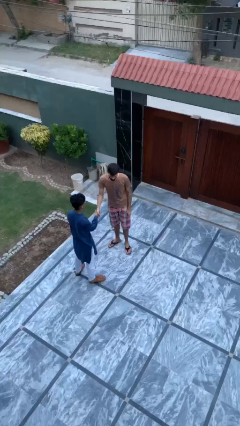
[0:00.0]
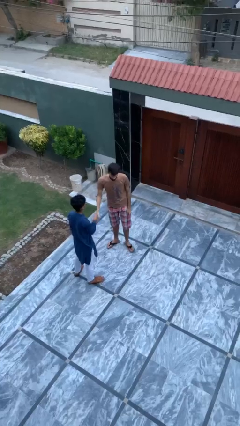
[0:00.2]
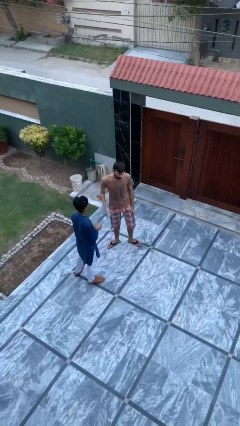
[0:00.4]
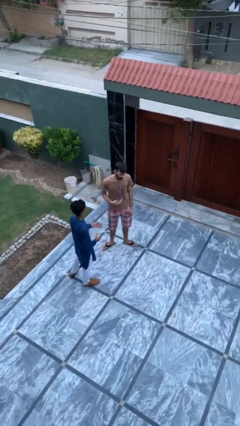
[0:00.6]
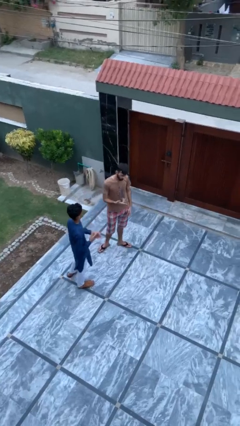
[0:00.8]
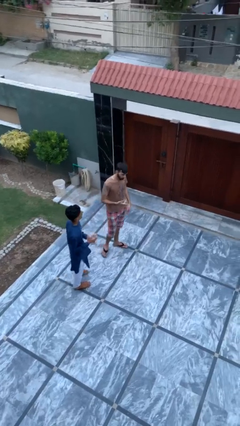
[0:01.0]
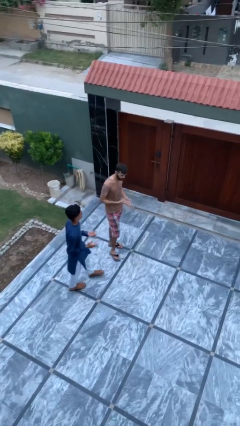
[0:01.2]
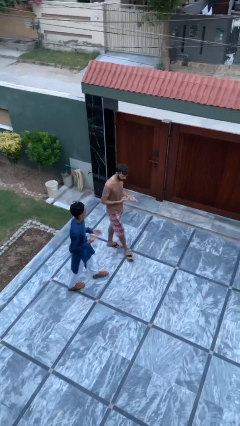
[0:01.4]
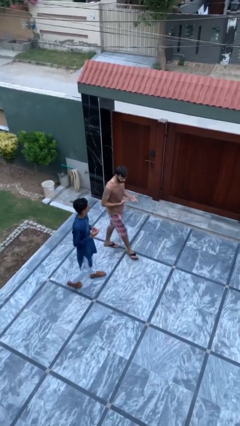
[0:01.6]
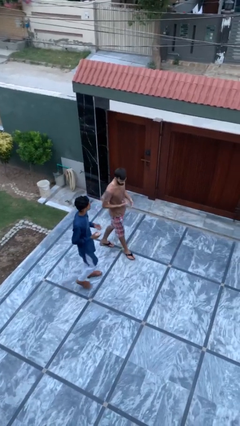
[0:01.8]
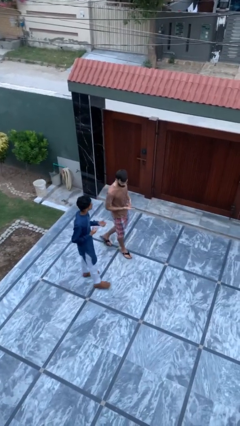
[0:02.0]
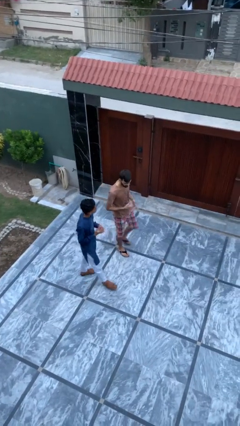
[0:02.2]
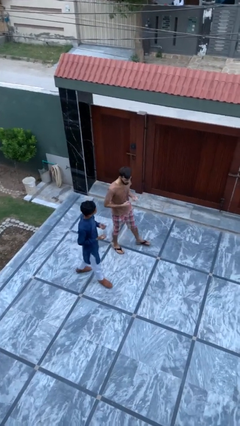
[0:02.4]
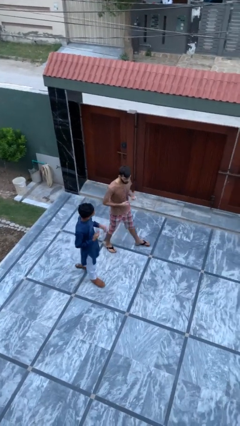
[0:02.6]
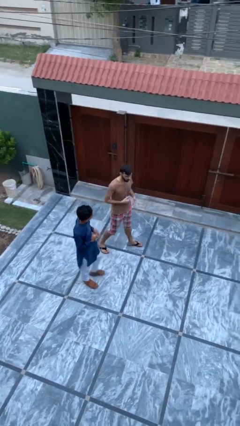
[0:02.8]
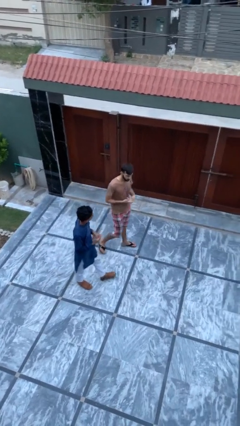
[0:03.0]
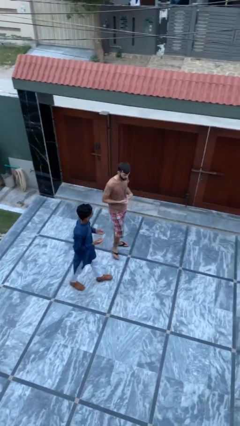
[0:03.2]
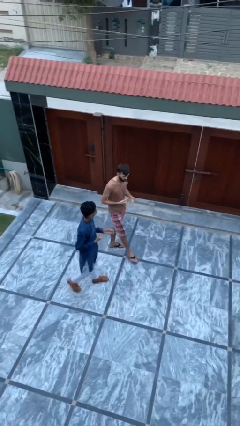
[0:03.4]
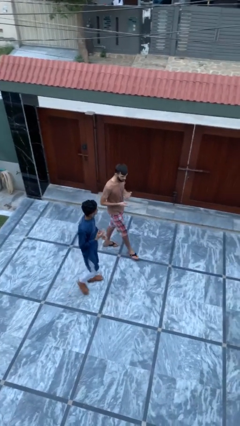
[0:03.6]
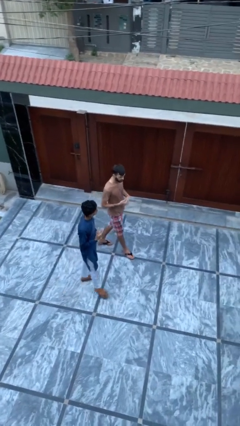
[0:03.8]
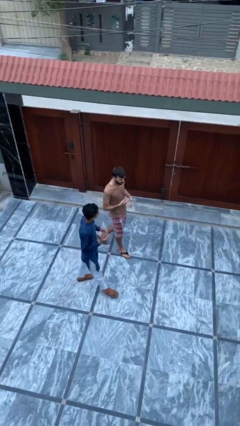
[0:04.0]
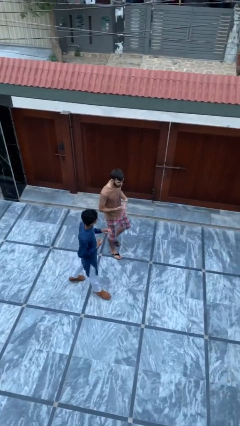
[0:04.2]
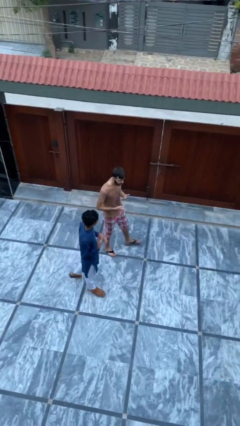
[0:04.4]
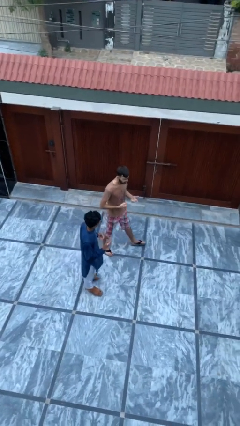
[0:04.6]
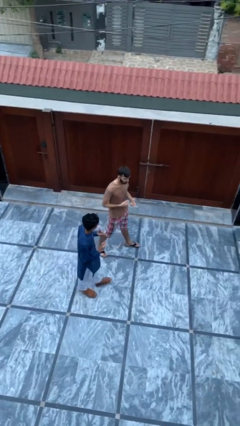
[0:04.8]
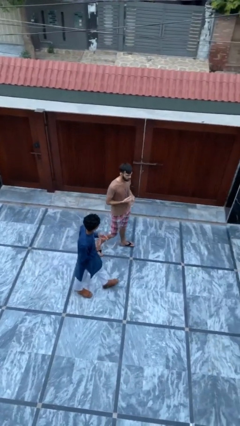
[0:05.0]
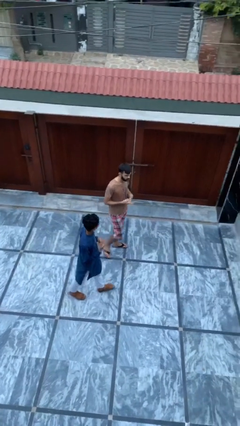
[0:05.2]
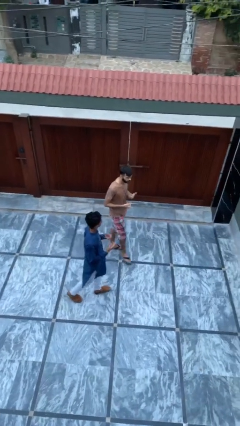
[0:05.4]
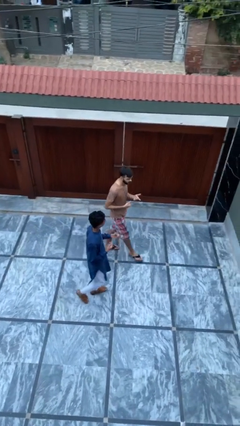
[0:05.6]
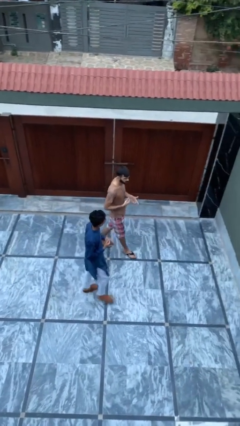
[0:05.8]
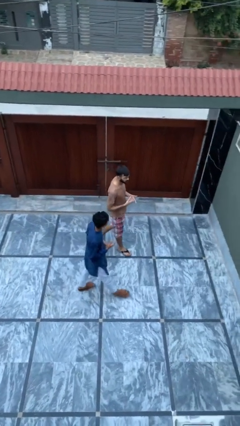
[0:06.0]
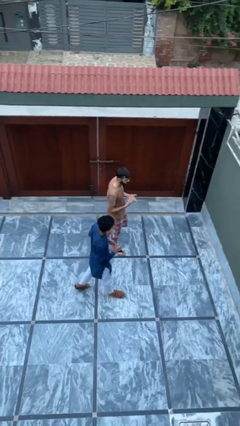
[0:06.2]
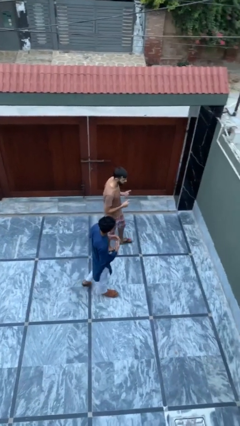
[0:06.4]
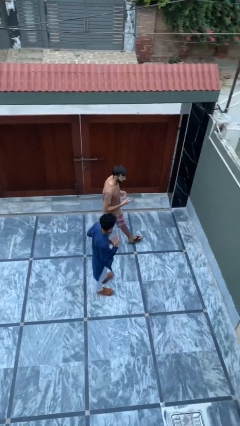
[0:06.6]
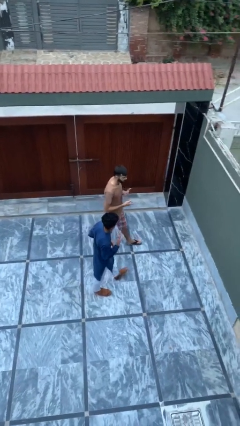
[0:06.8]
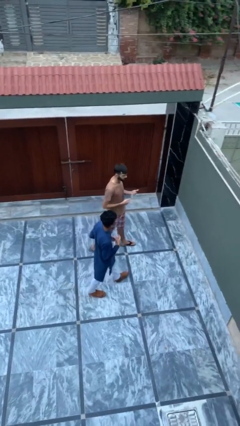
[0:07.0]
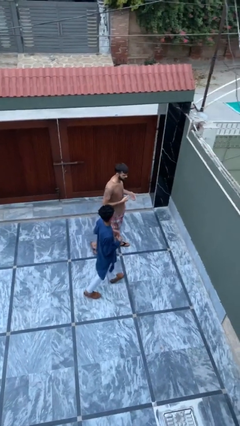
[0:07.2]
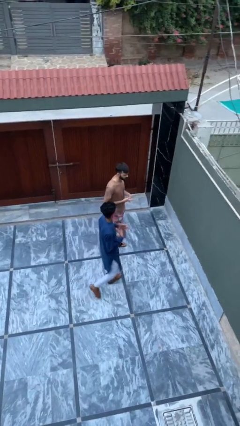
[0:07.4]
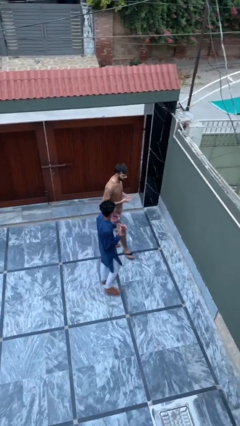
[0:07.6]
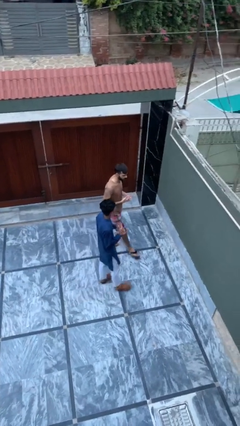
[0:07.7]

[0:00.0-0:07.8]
person talks to person

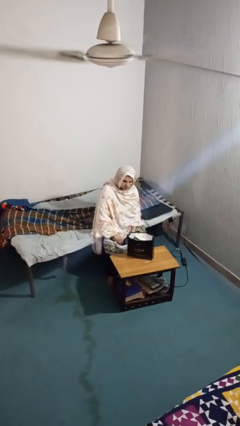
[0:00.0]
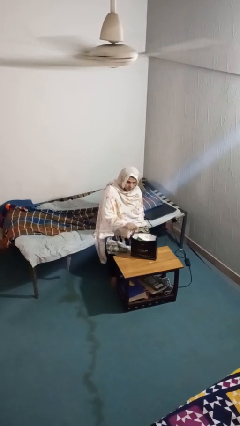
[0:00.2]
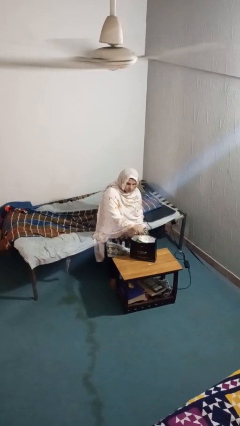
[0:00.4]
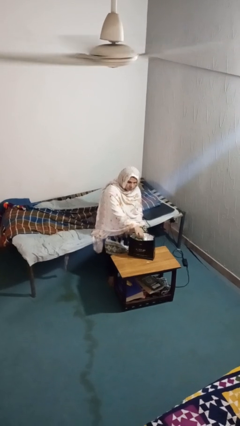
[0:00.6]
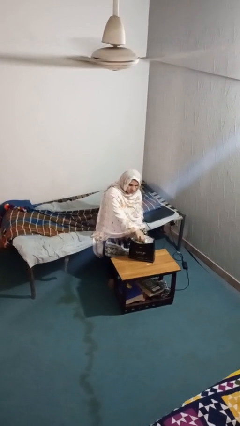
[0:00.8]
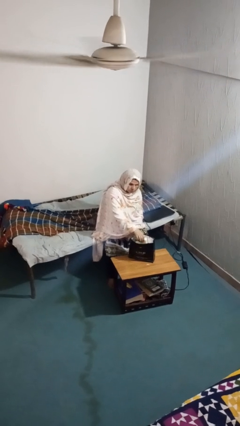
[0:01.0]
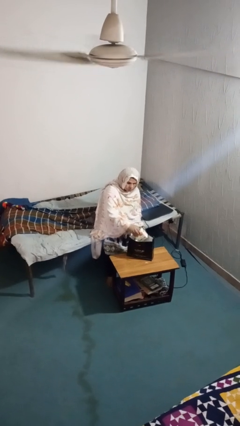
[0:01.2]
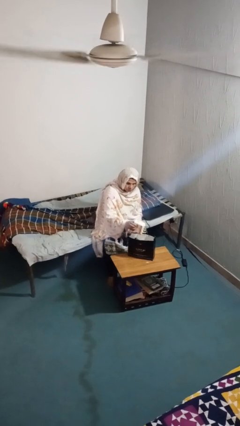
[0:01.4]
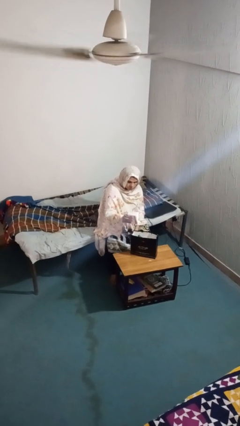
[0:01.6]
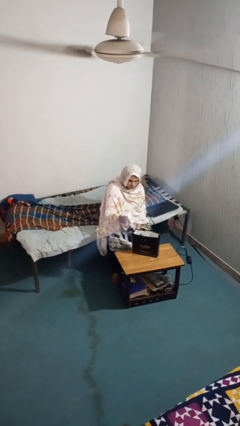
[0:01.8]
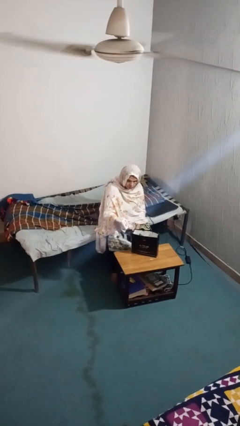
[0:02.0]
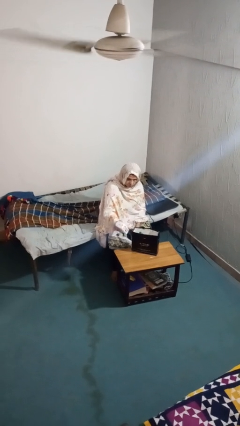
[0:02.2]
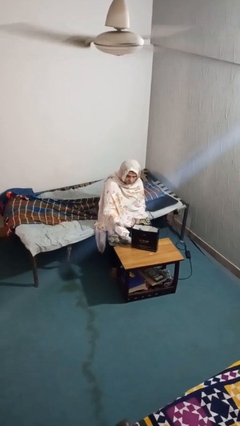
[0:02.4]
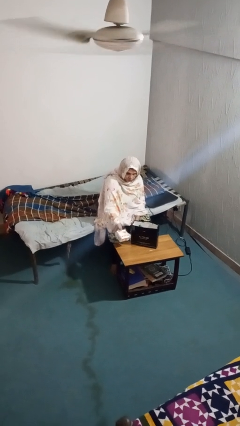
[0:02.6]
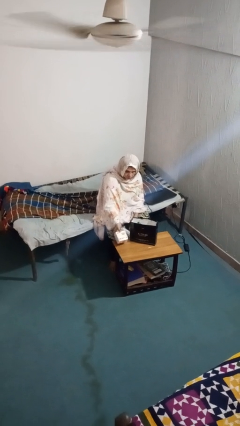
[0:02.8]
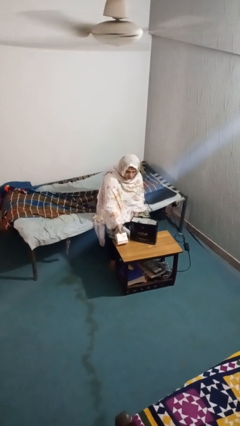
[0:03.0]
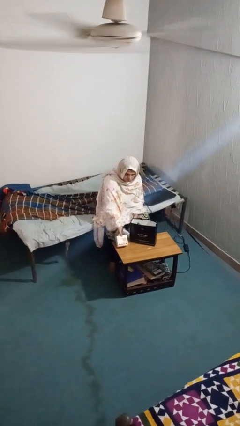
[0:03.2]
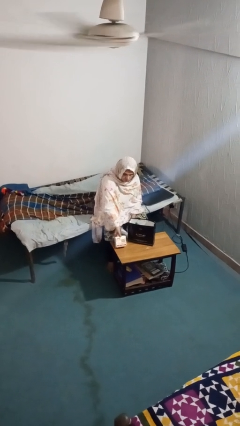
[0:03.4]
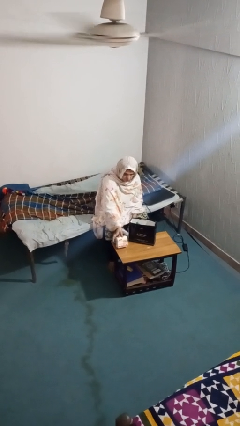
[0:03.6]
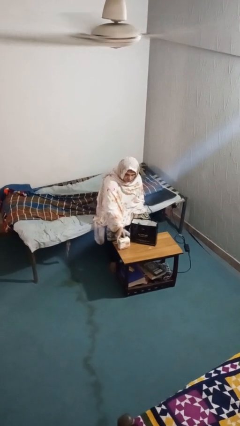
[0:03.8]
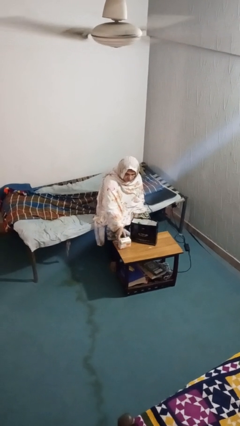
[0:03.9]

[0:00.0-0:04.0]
person takes object from bag

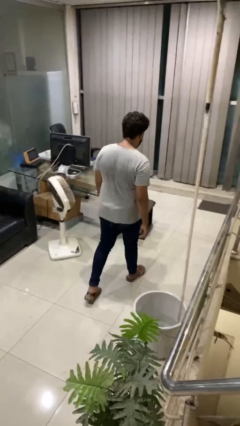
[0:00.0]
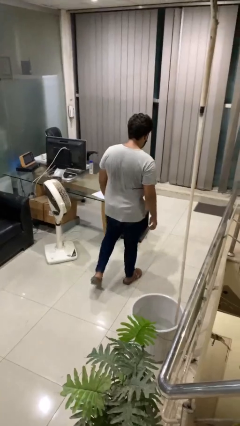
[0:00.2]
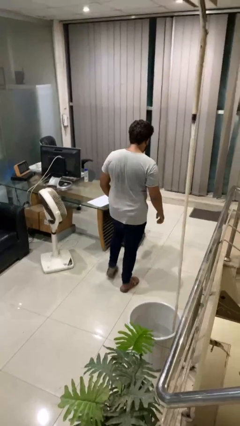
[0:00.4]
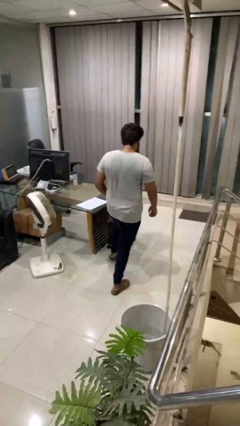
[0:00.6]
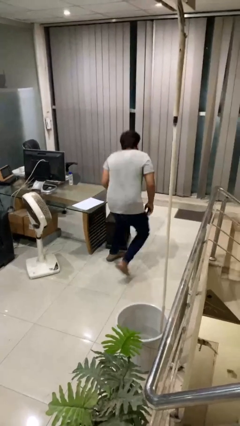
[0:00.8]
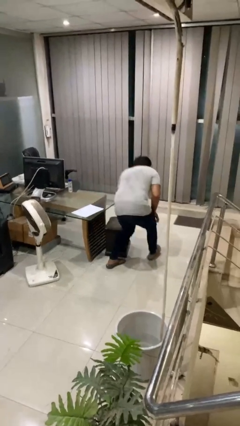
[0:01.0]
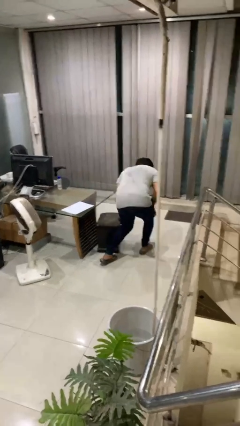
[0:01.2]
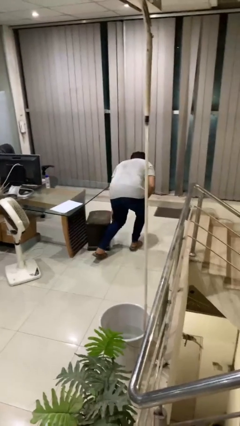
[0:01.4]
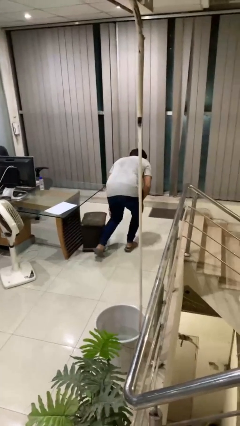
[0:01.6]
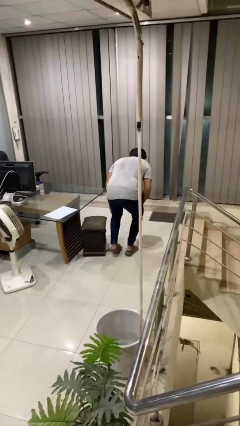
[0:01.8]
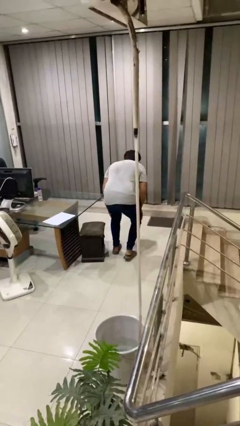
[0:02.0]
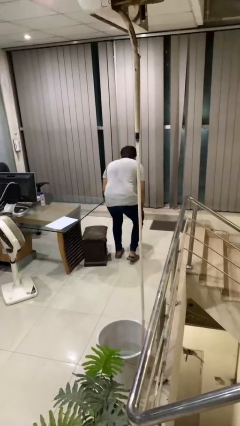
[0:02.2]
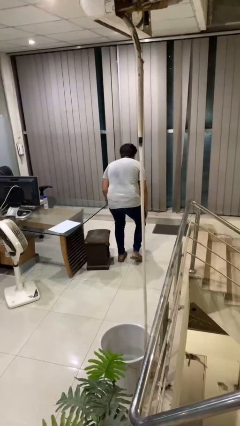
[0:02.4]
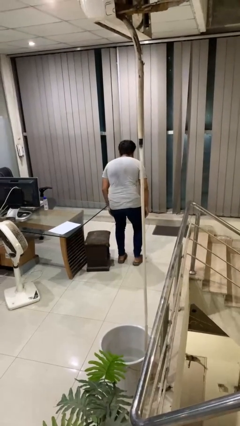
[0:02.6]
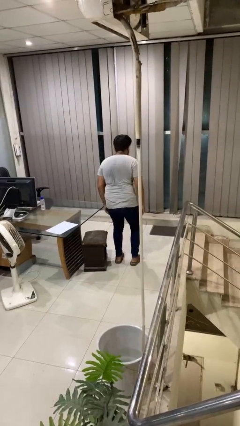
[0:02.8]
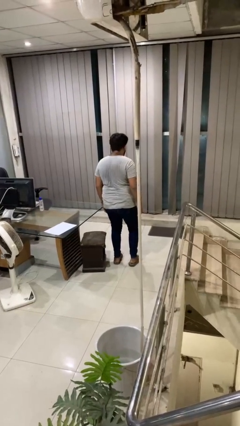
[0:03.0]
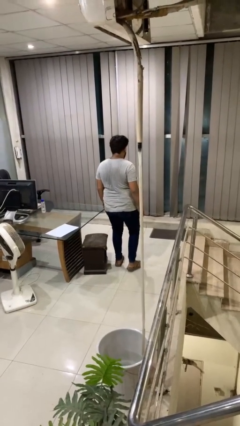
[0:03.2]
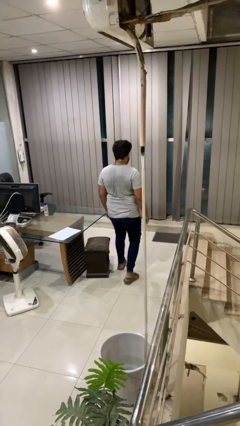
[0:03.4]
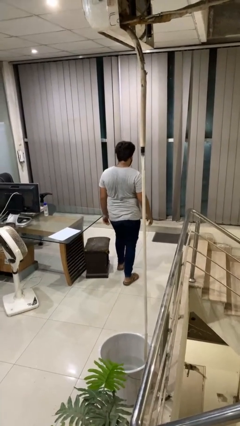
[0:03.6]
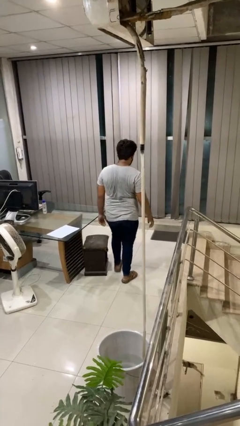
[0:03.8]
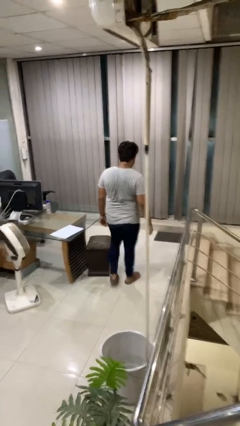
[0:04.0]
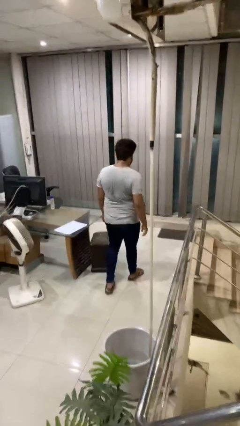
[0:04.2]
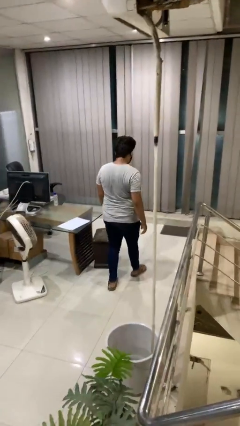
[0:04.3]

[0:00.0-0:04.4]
person bumps into table

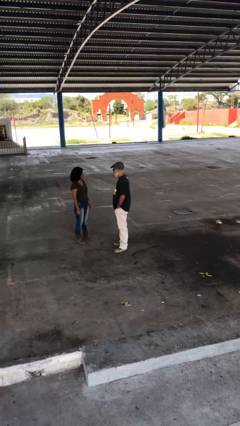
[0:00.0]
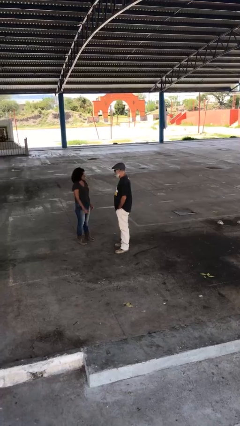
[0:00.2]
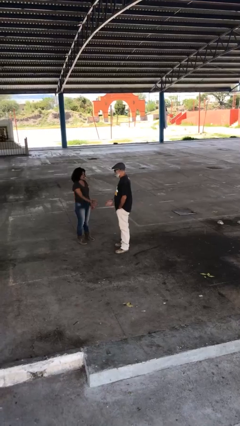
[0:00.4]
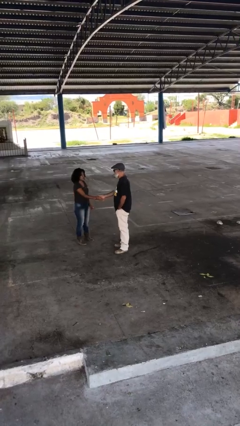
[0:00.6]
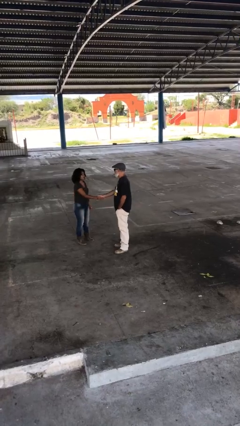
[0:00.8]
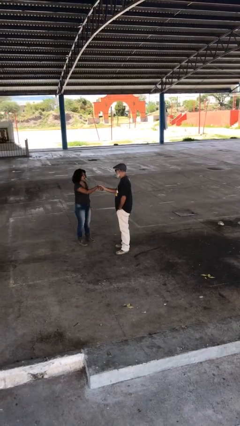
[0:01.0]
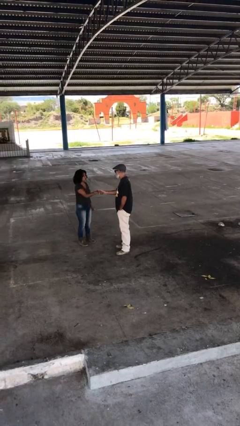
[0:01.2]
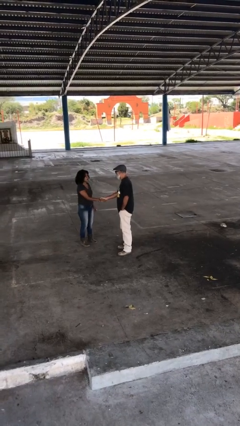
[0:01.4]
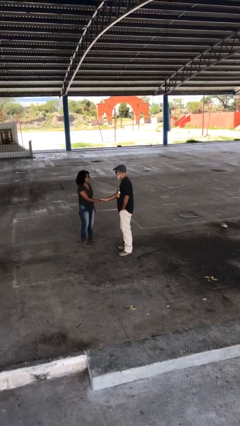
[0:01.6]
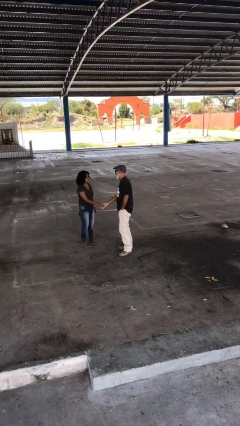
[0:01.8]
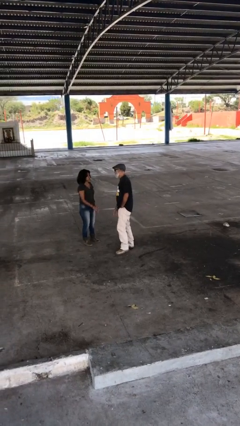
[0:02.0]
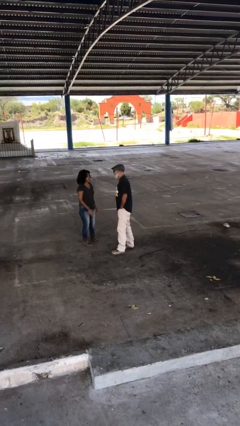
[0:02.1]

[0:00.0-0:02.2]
person shakes hand
